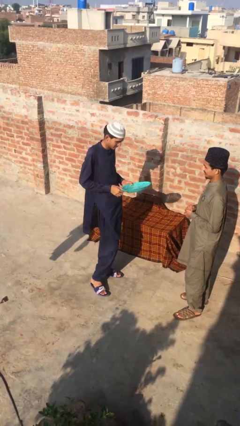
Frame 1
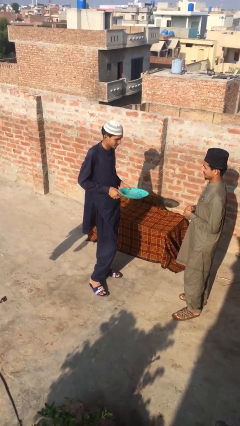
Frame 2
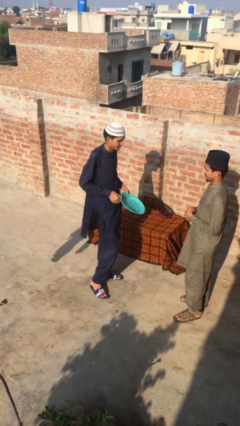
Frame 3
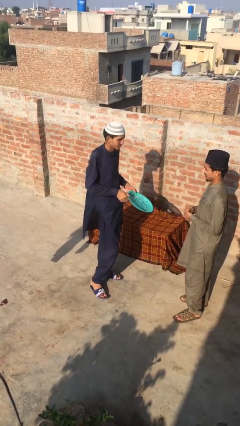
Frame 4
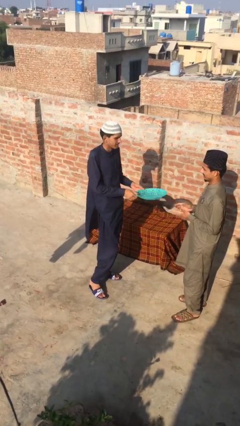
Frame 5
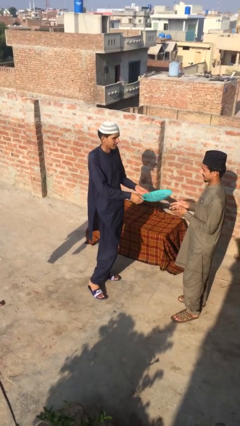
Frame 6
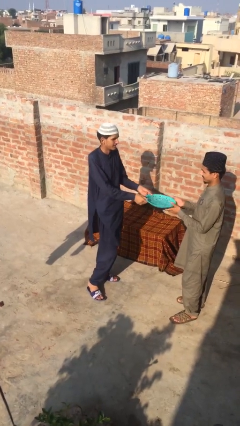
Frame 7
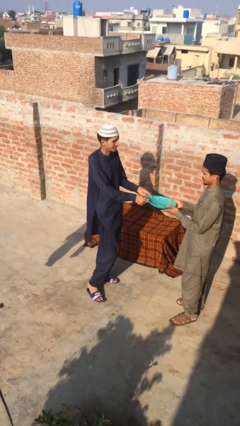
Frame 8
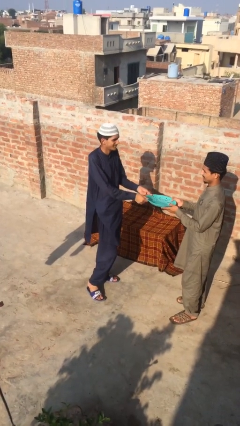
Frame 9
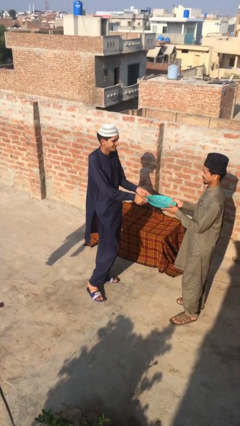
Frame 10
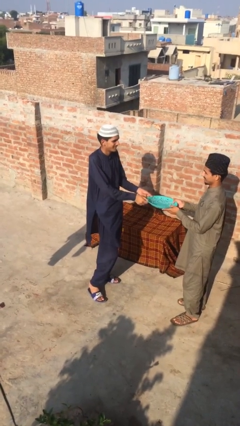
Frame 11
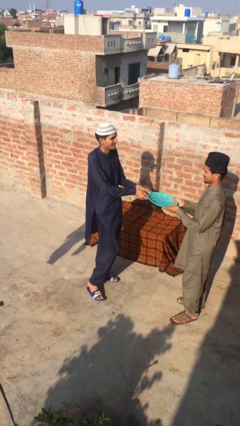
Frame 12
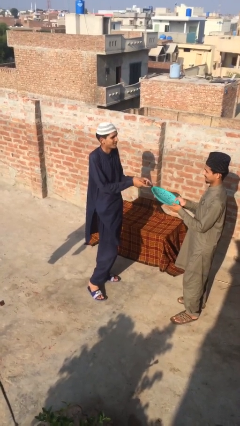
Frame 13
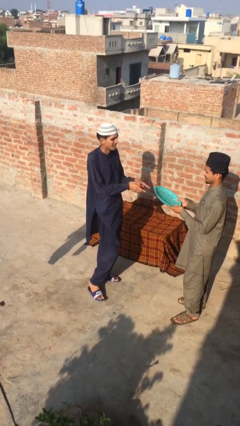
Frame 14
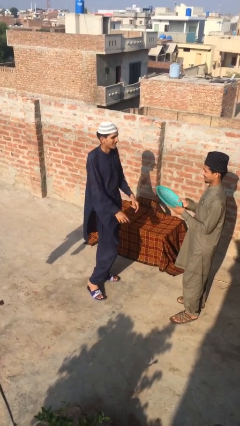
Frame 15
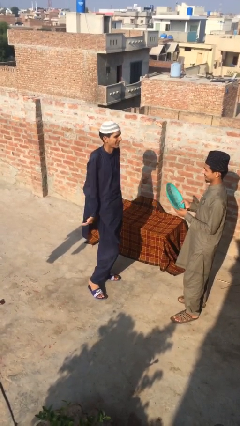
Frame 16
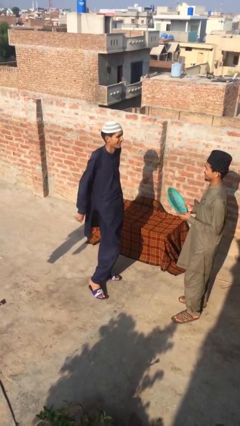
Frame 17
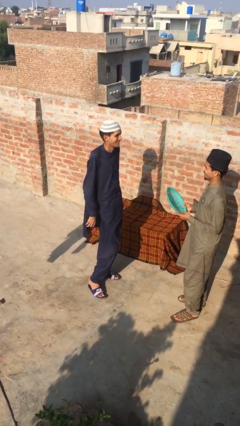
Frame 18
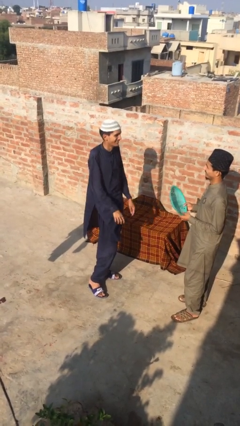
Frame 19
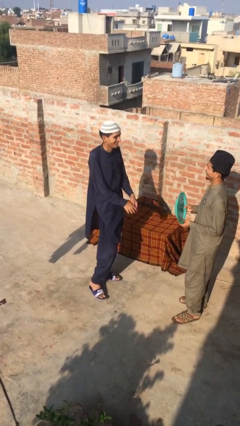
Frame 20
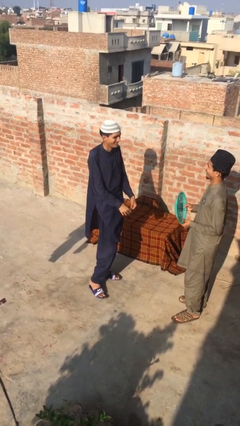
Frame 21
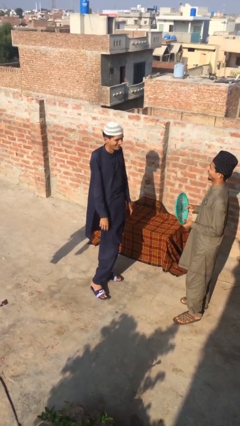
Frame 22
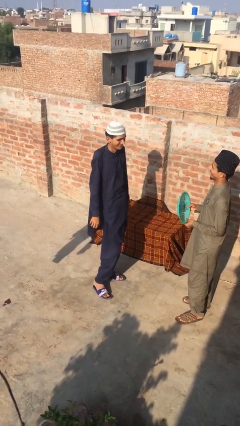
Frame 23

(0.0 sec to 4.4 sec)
person transfers object to person

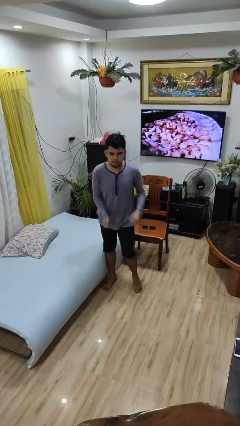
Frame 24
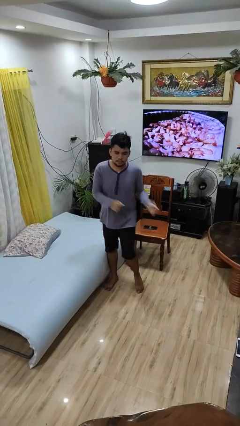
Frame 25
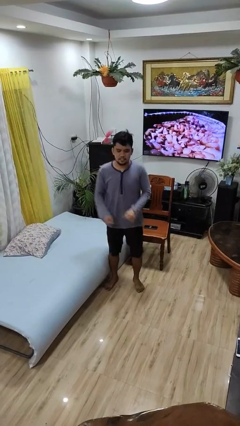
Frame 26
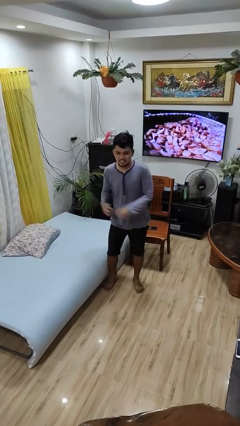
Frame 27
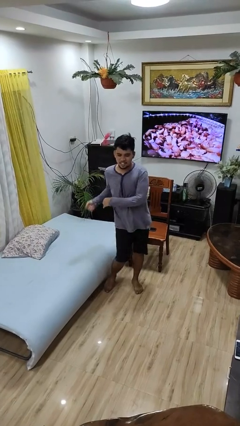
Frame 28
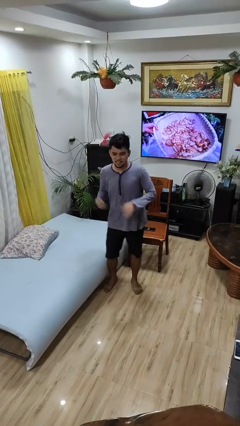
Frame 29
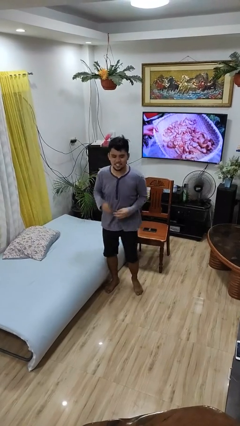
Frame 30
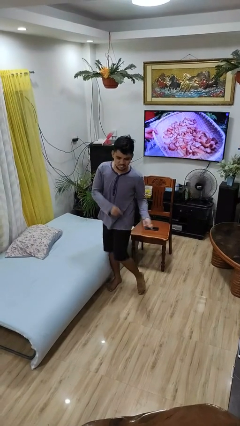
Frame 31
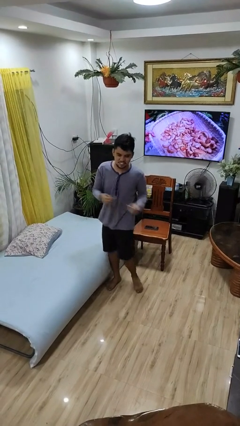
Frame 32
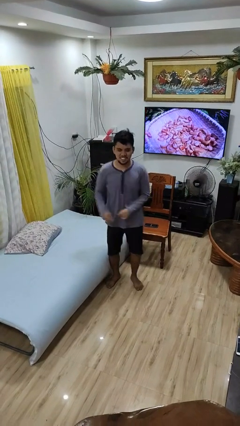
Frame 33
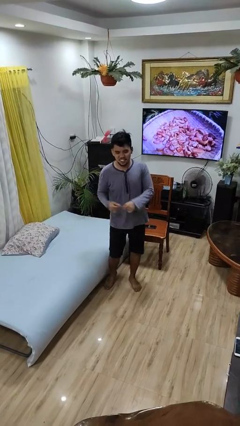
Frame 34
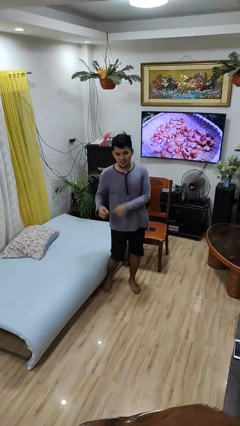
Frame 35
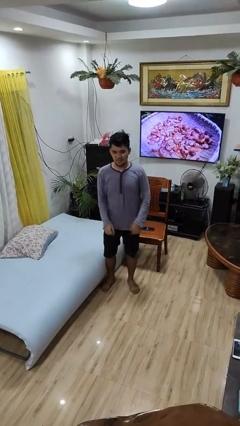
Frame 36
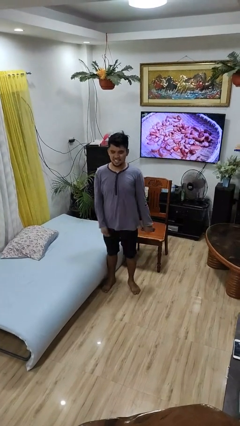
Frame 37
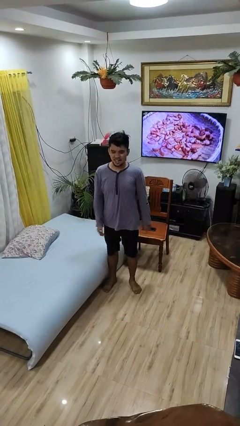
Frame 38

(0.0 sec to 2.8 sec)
person dances in place

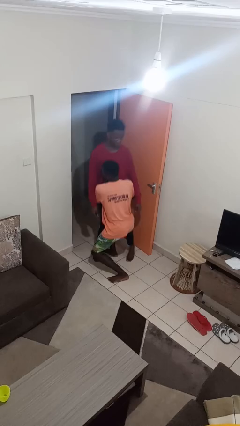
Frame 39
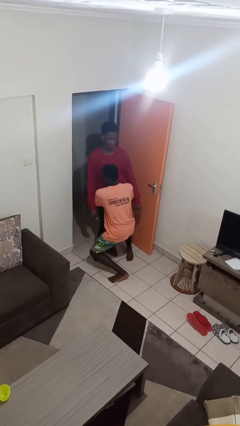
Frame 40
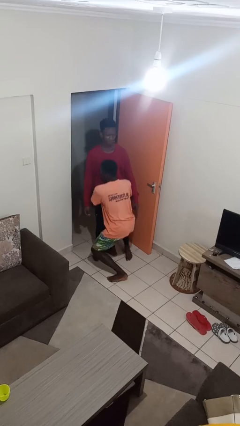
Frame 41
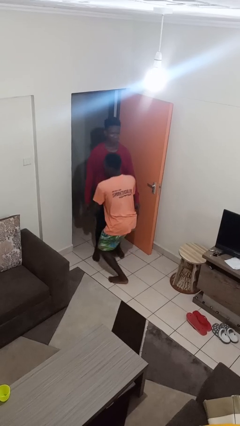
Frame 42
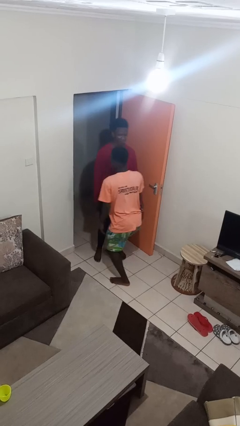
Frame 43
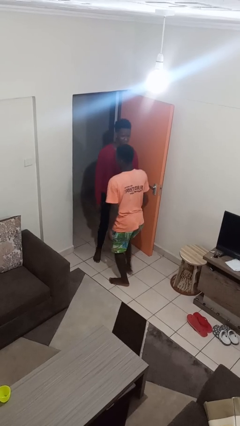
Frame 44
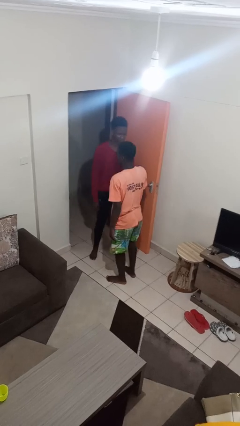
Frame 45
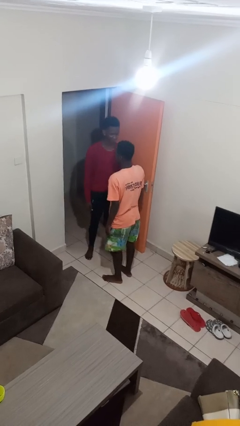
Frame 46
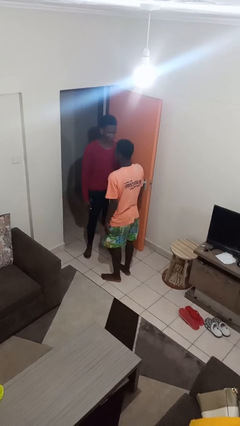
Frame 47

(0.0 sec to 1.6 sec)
person puts down person

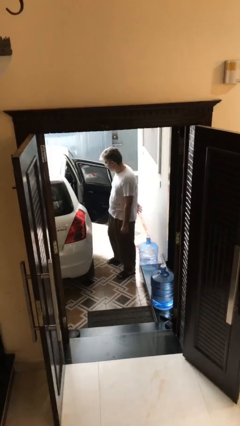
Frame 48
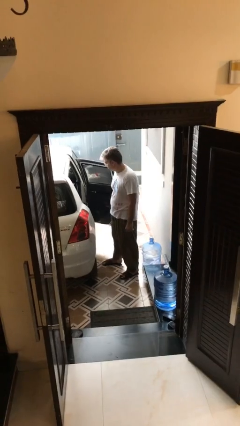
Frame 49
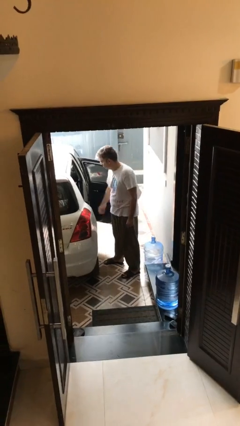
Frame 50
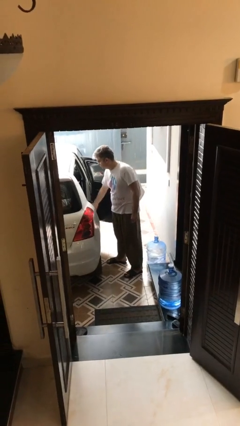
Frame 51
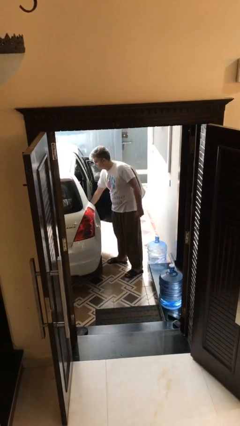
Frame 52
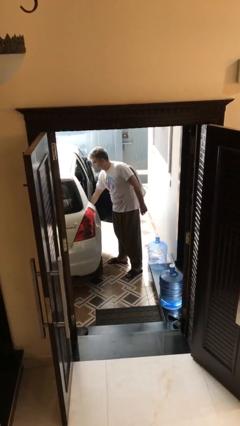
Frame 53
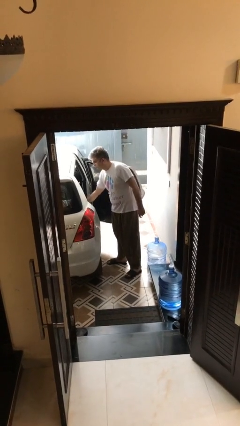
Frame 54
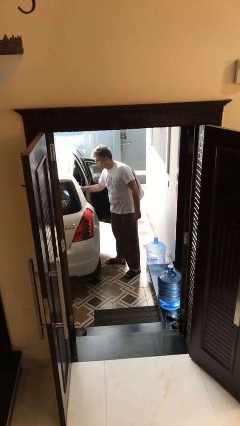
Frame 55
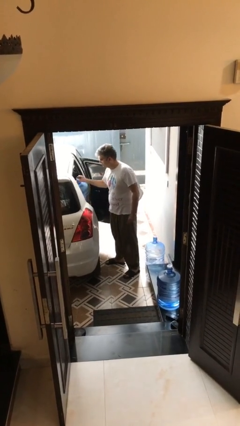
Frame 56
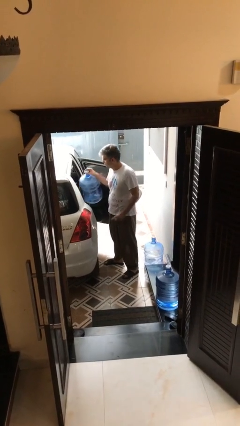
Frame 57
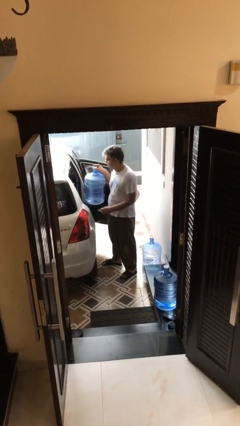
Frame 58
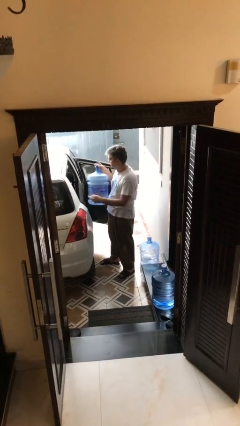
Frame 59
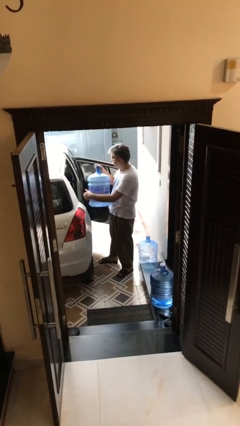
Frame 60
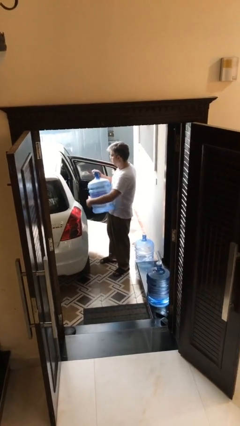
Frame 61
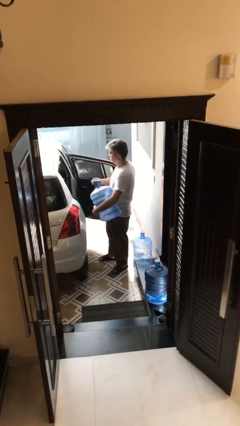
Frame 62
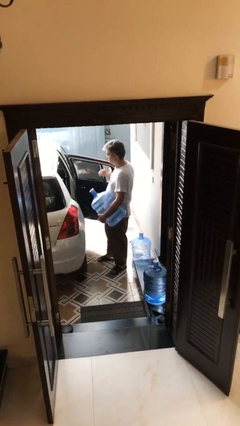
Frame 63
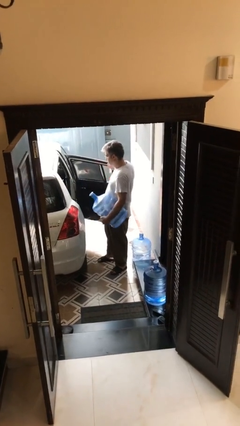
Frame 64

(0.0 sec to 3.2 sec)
person unloads car

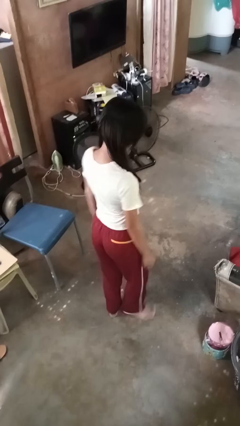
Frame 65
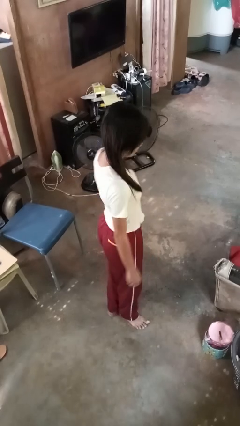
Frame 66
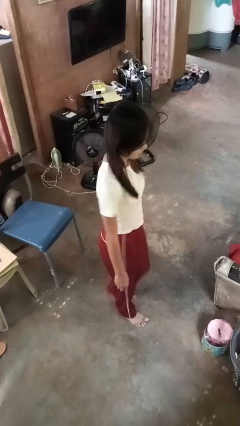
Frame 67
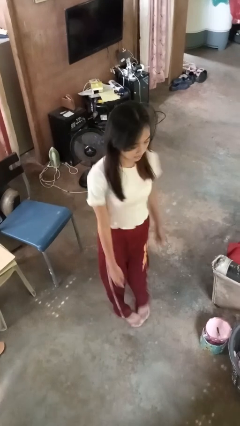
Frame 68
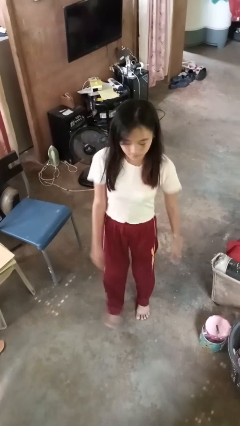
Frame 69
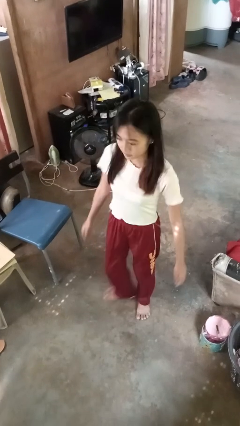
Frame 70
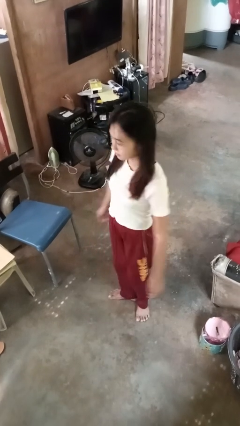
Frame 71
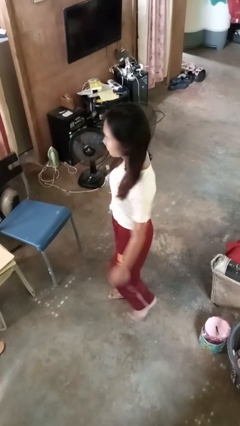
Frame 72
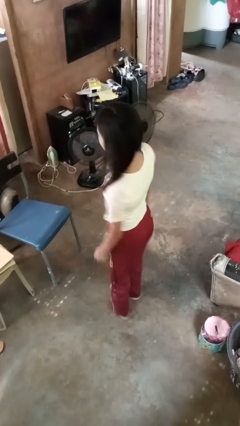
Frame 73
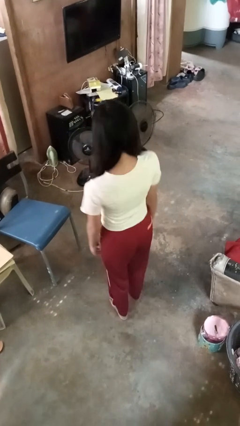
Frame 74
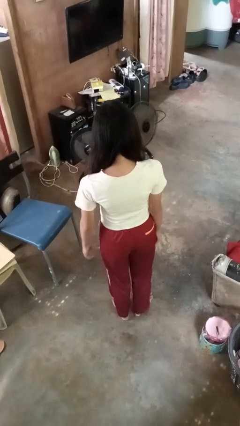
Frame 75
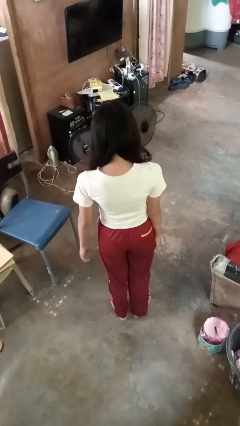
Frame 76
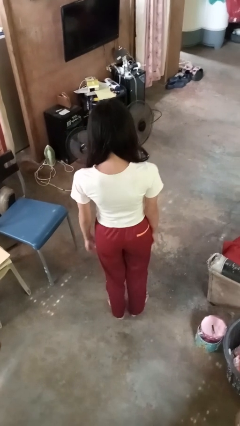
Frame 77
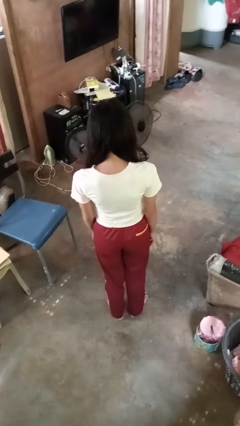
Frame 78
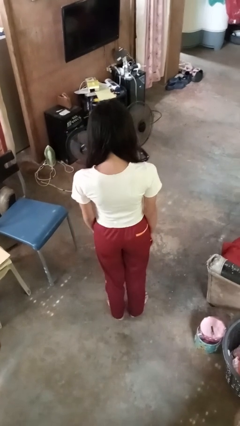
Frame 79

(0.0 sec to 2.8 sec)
person twirls

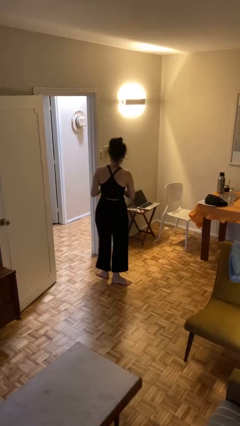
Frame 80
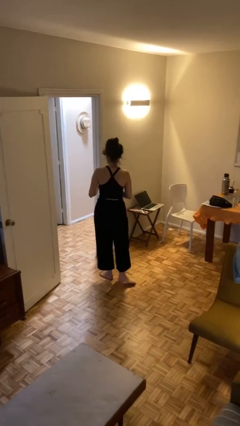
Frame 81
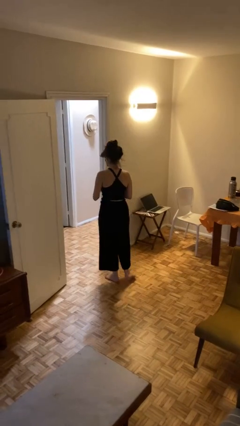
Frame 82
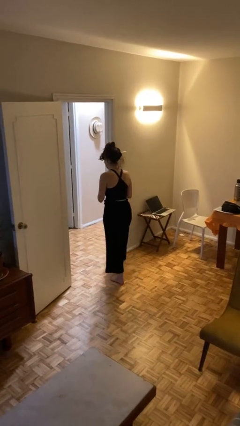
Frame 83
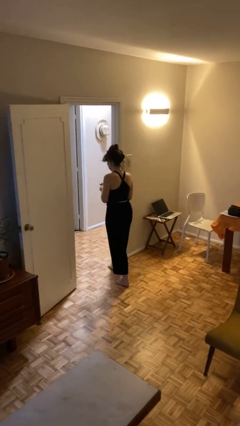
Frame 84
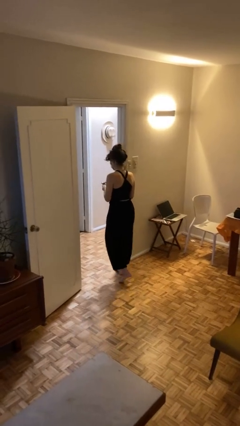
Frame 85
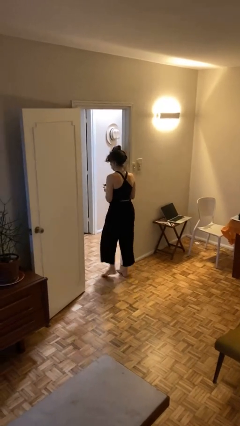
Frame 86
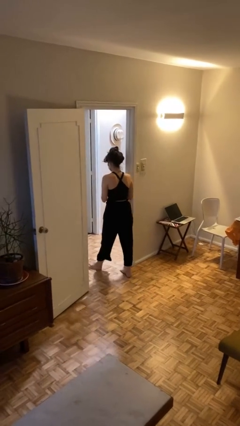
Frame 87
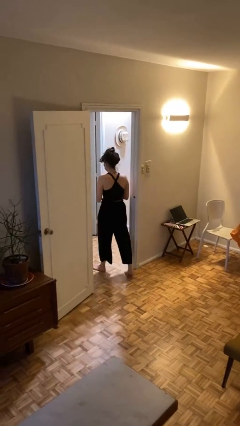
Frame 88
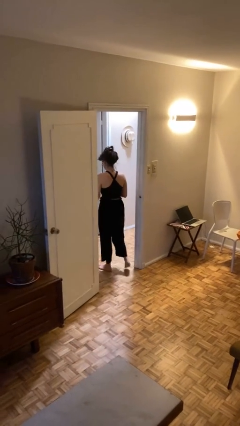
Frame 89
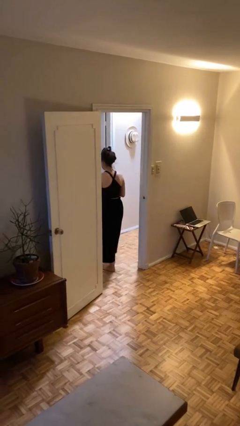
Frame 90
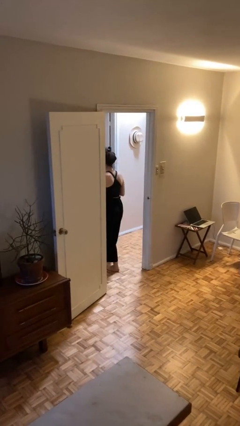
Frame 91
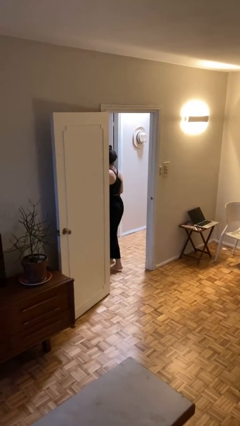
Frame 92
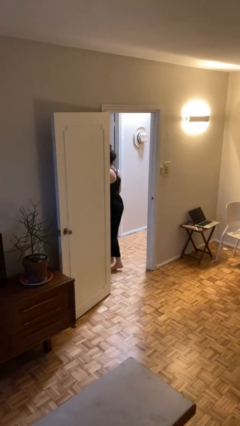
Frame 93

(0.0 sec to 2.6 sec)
person exits scene through structure
